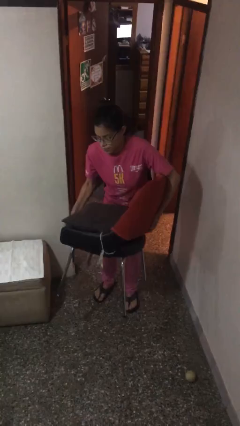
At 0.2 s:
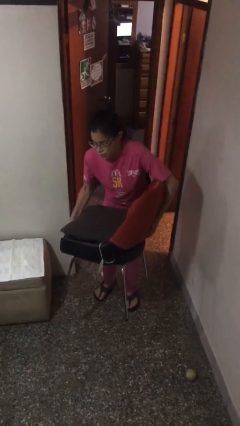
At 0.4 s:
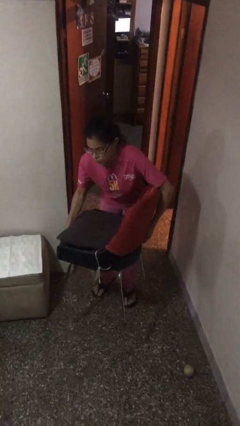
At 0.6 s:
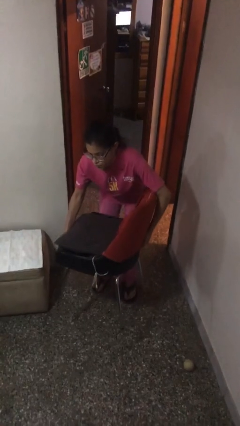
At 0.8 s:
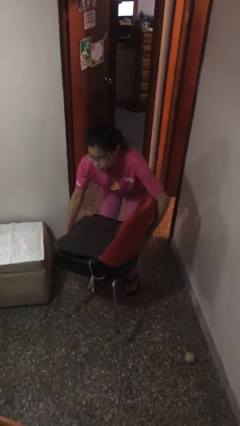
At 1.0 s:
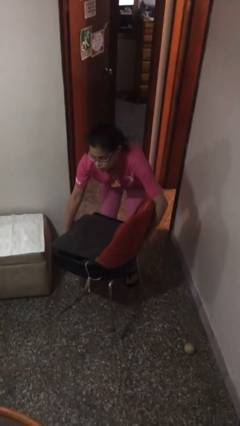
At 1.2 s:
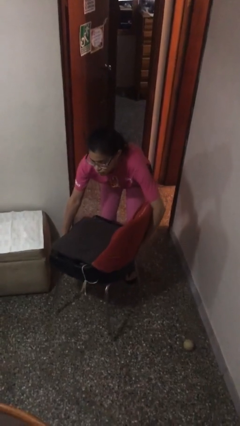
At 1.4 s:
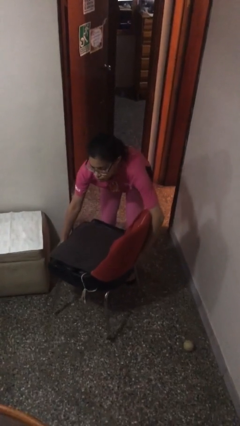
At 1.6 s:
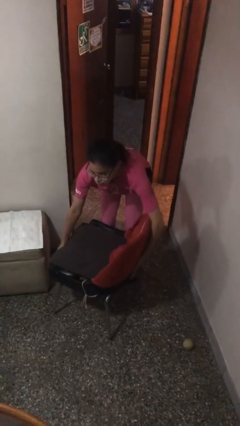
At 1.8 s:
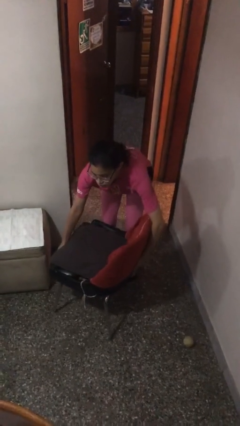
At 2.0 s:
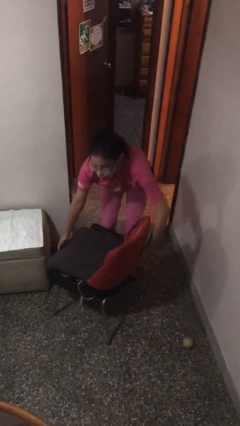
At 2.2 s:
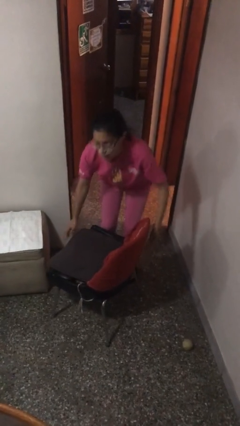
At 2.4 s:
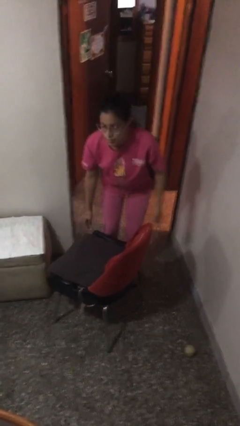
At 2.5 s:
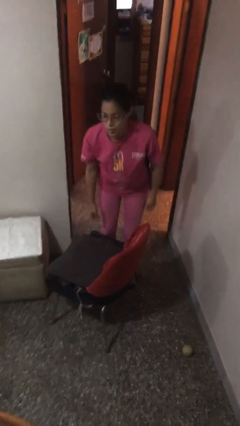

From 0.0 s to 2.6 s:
person puts down object on floor

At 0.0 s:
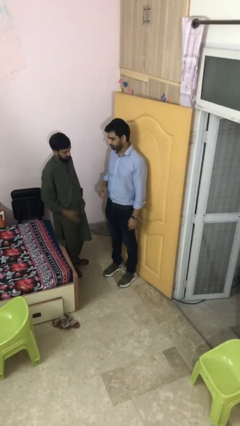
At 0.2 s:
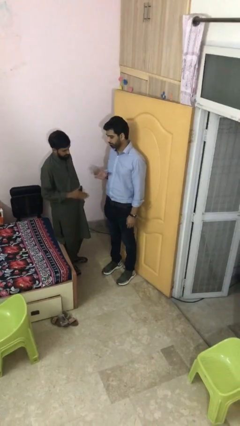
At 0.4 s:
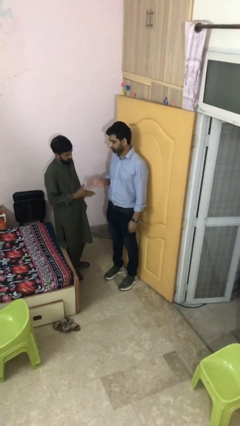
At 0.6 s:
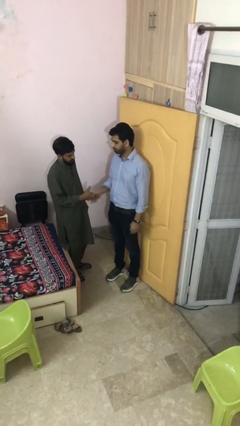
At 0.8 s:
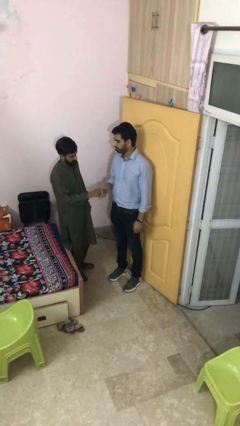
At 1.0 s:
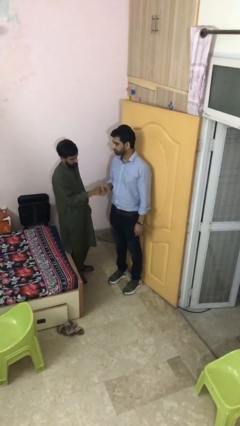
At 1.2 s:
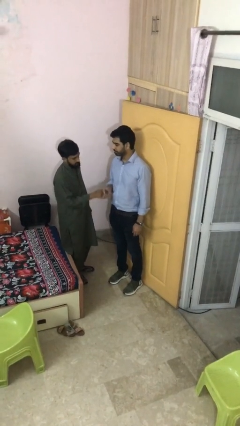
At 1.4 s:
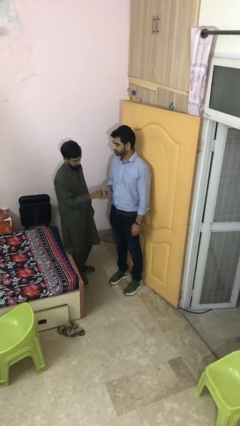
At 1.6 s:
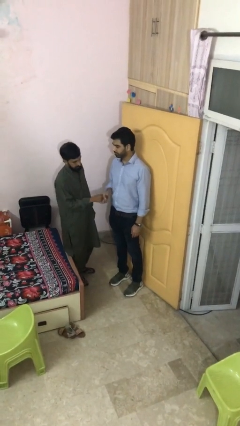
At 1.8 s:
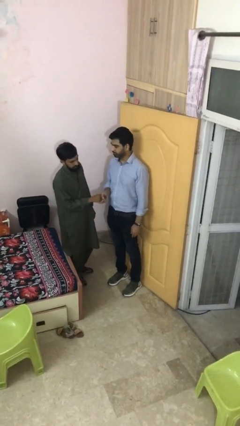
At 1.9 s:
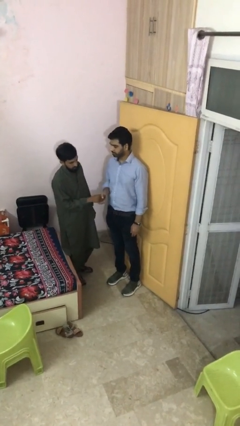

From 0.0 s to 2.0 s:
person shakes hand

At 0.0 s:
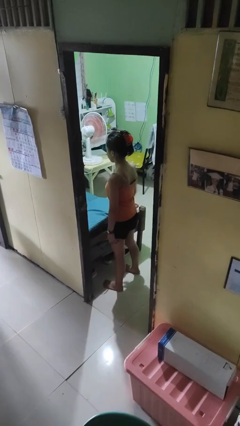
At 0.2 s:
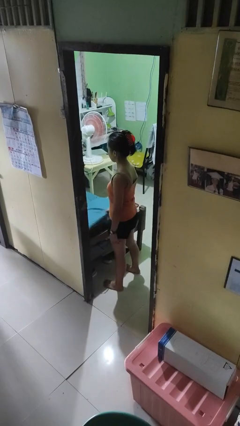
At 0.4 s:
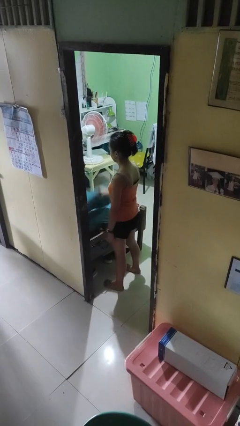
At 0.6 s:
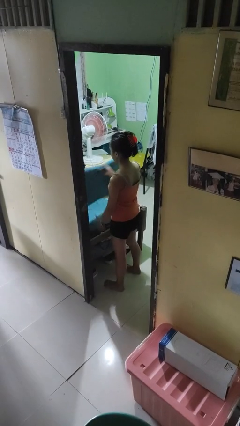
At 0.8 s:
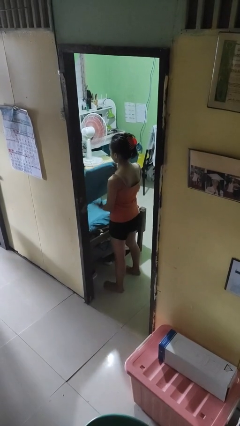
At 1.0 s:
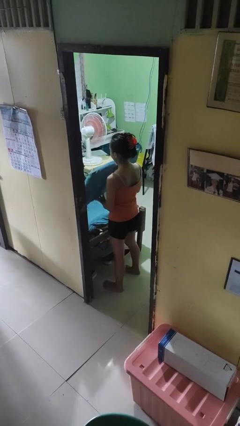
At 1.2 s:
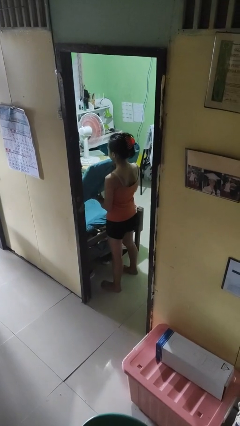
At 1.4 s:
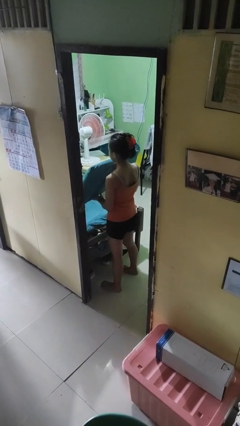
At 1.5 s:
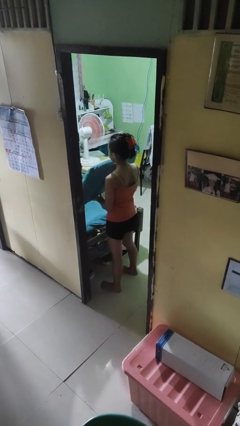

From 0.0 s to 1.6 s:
person picks up object from bed

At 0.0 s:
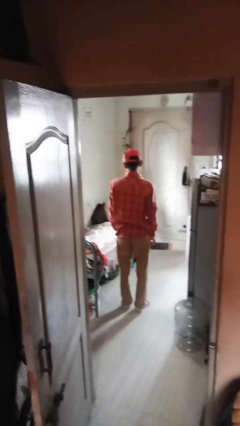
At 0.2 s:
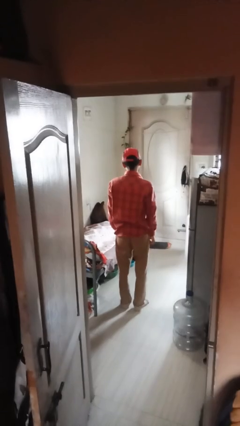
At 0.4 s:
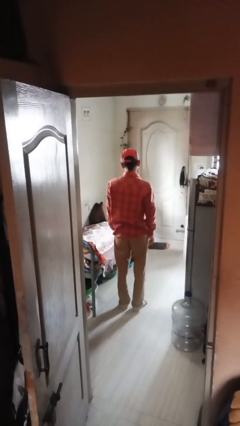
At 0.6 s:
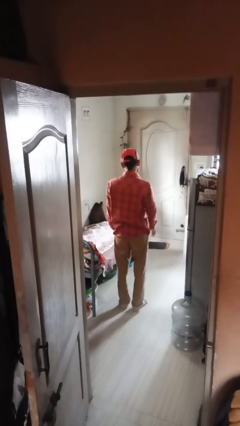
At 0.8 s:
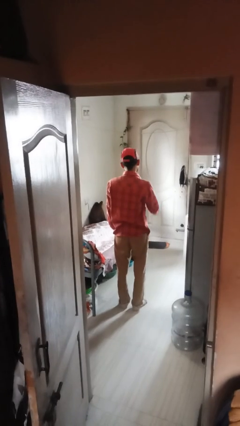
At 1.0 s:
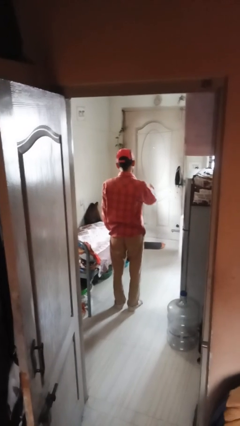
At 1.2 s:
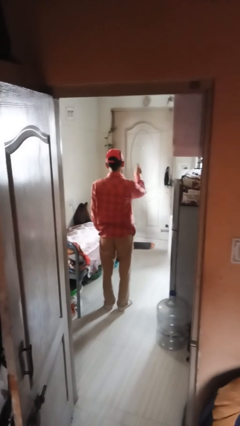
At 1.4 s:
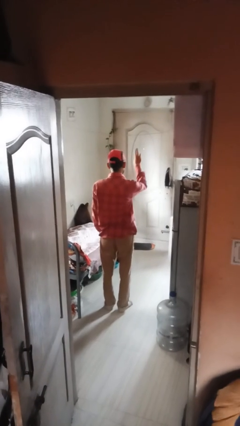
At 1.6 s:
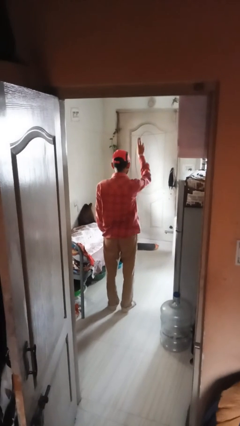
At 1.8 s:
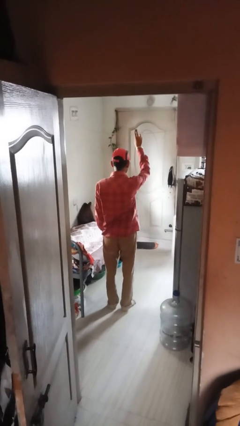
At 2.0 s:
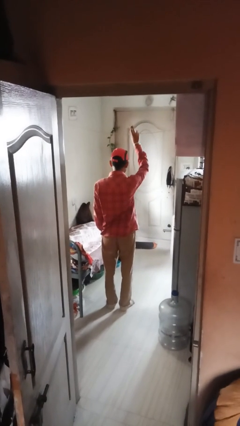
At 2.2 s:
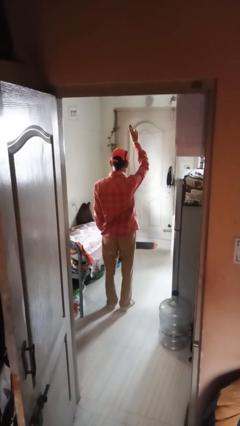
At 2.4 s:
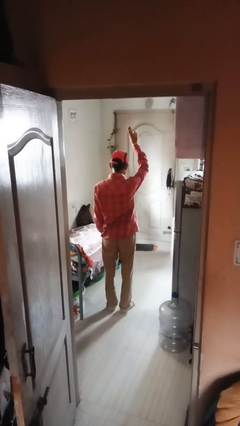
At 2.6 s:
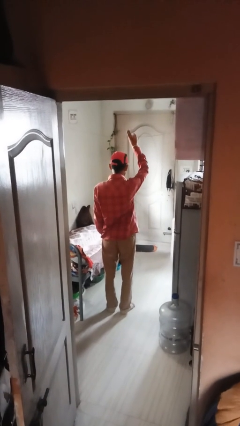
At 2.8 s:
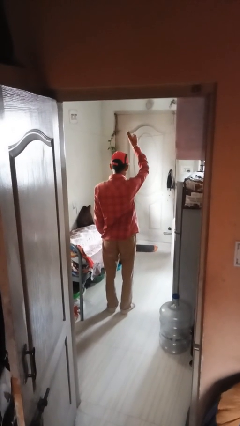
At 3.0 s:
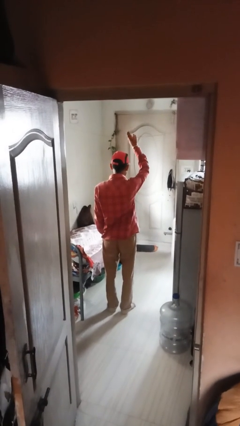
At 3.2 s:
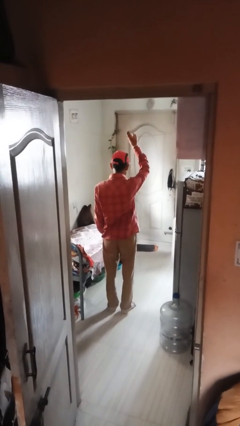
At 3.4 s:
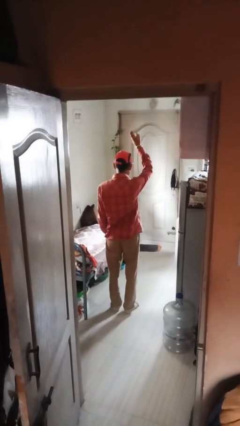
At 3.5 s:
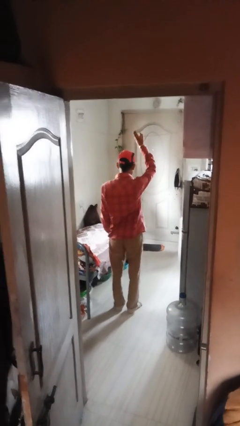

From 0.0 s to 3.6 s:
person gestures swipe up

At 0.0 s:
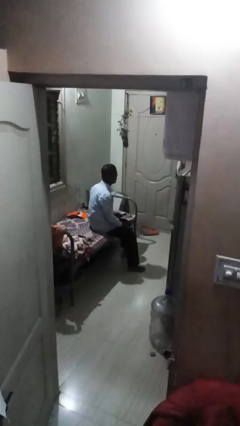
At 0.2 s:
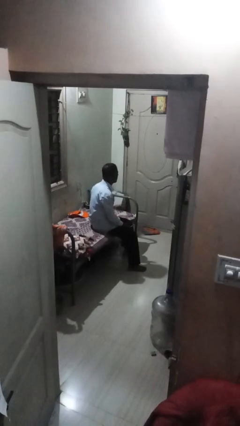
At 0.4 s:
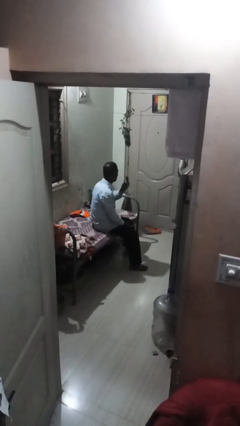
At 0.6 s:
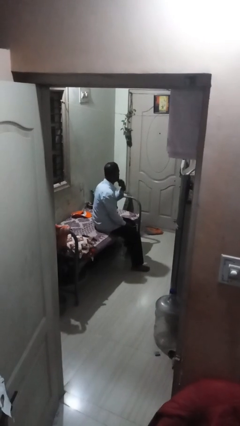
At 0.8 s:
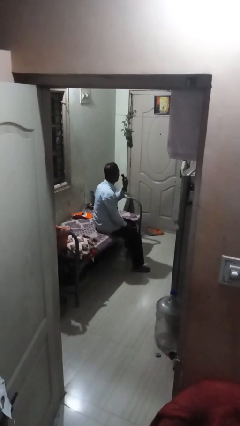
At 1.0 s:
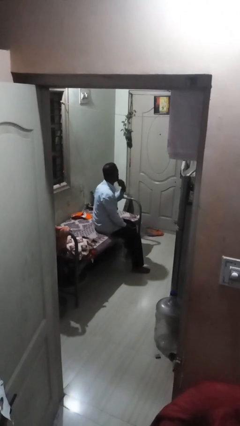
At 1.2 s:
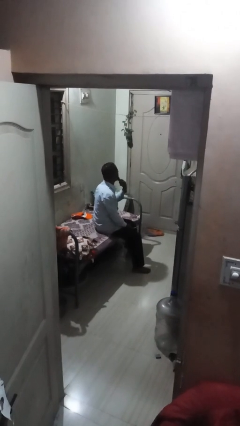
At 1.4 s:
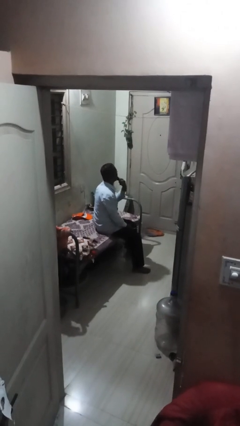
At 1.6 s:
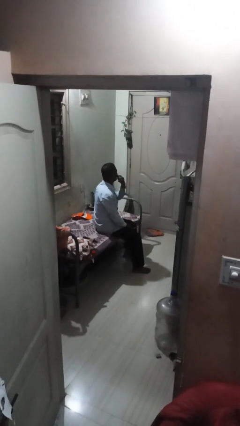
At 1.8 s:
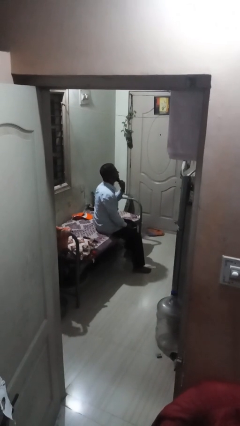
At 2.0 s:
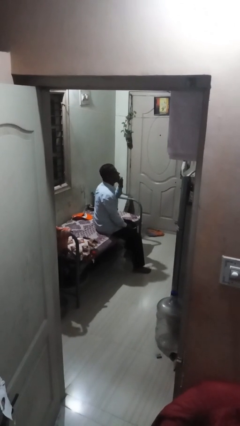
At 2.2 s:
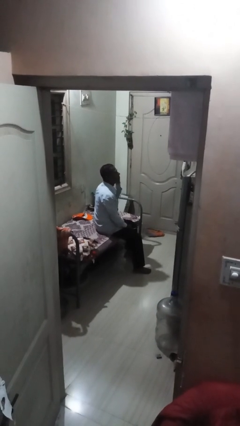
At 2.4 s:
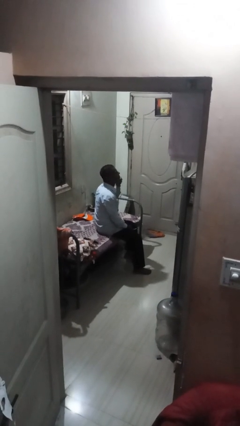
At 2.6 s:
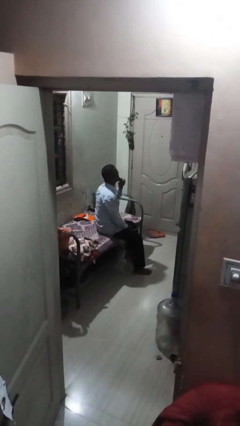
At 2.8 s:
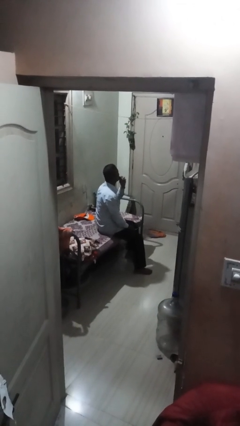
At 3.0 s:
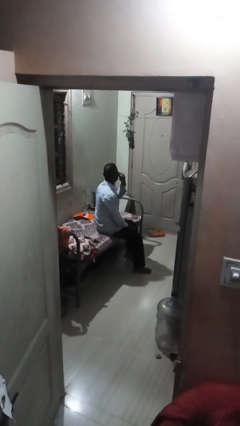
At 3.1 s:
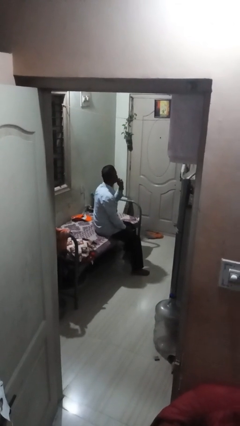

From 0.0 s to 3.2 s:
person applies shaving cream

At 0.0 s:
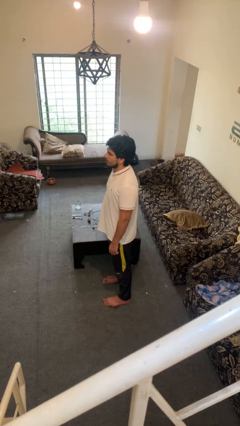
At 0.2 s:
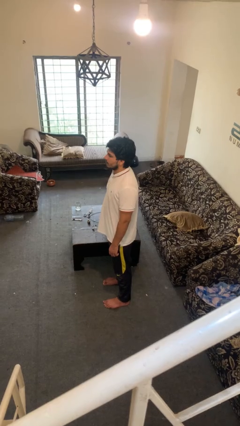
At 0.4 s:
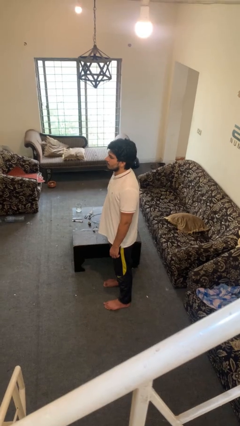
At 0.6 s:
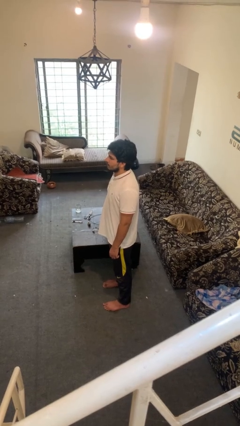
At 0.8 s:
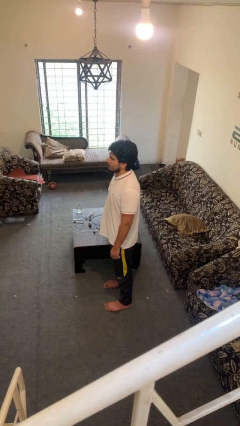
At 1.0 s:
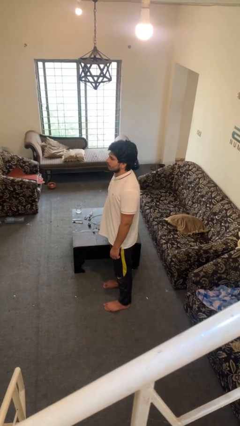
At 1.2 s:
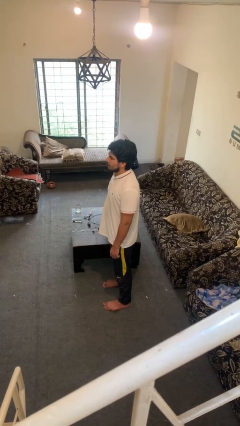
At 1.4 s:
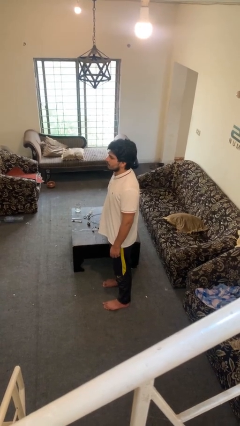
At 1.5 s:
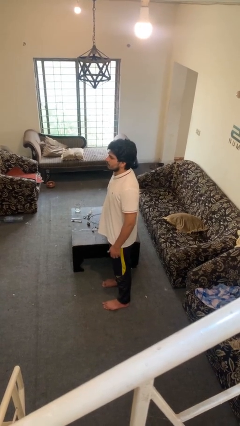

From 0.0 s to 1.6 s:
person stretches back

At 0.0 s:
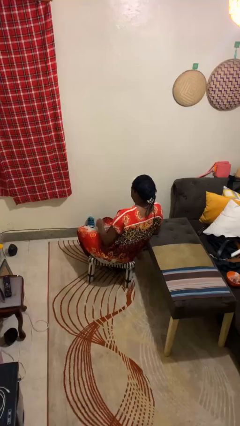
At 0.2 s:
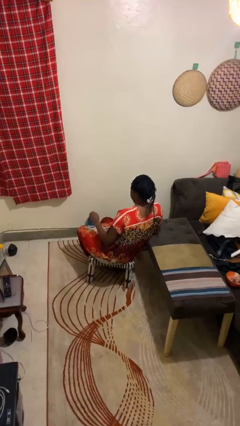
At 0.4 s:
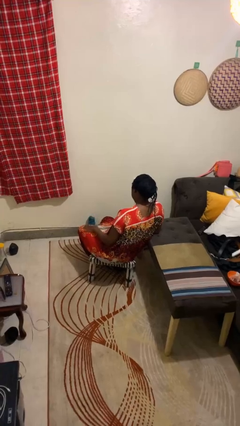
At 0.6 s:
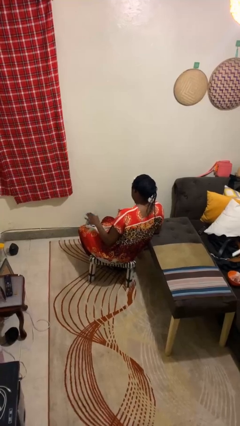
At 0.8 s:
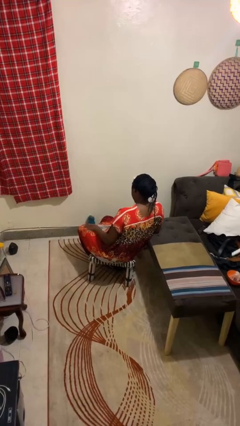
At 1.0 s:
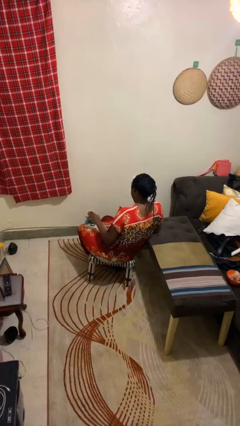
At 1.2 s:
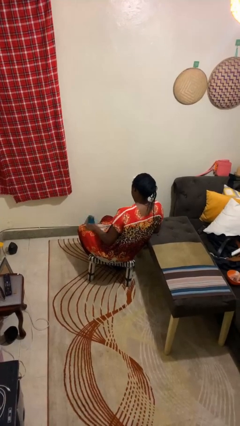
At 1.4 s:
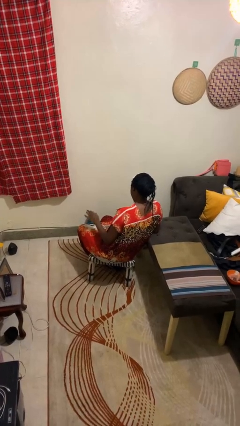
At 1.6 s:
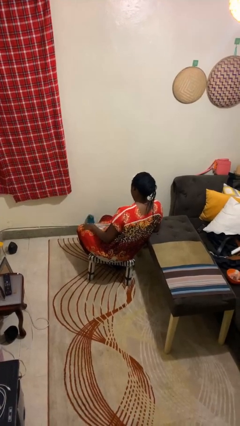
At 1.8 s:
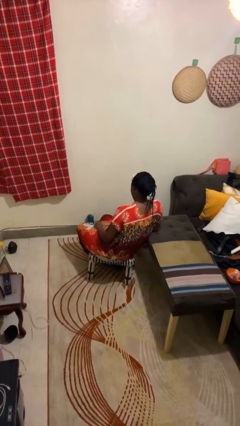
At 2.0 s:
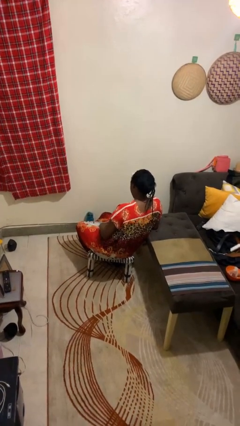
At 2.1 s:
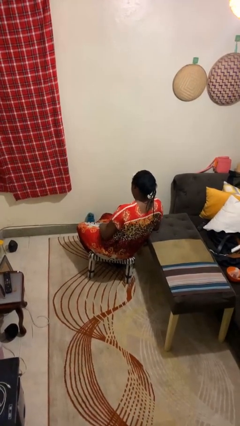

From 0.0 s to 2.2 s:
person slaps hands on thighs
